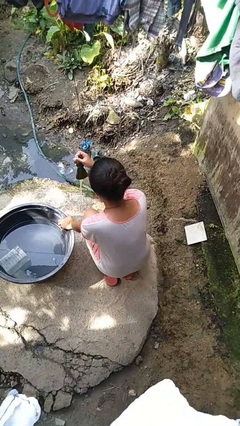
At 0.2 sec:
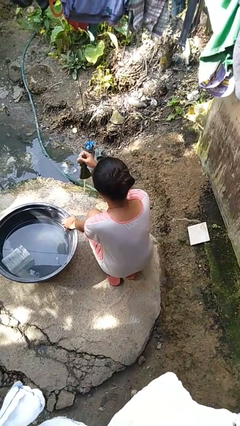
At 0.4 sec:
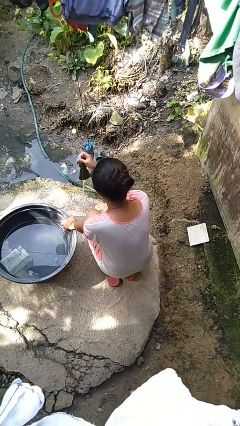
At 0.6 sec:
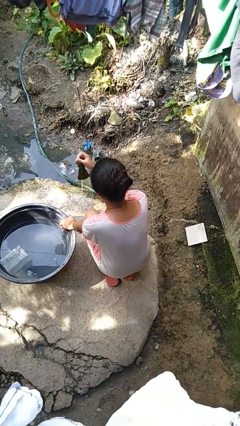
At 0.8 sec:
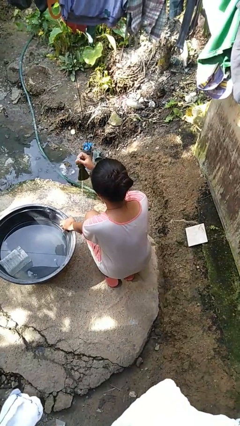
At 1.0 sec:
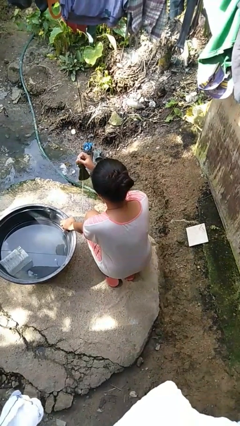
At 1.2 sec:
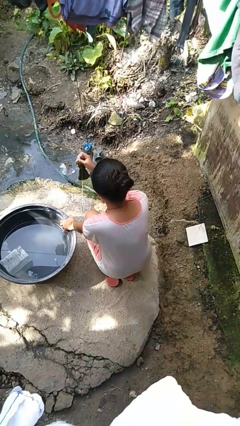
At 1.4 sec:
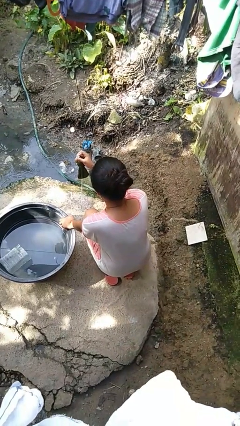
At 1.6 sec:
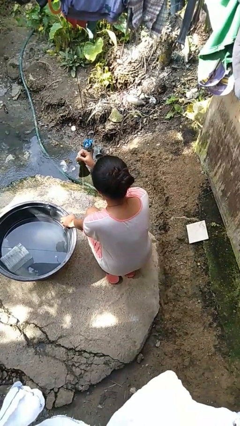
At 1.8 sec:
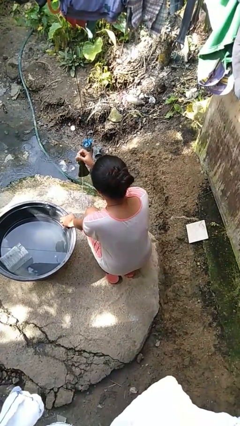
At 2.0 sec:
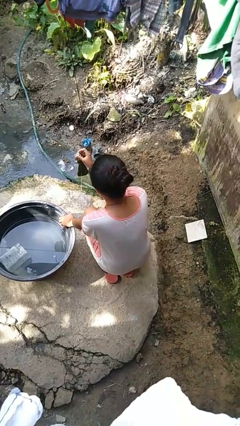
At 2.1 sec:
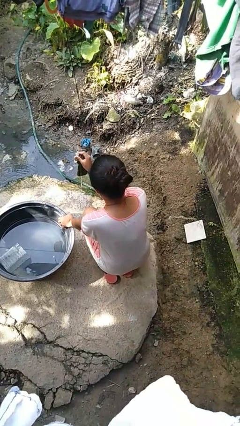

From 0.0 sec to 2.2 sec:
person turns off faucet

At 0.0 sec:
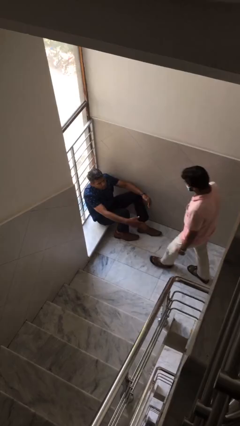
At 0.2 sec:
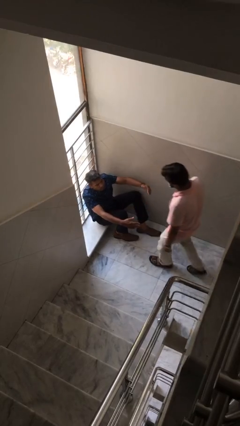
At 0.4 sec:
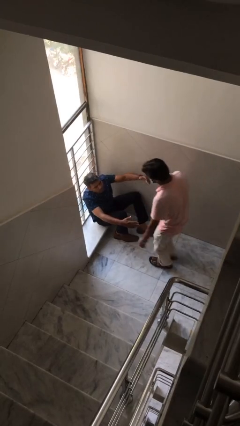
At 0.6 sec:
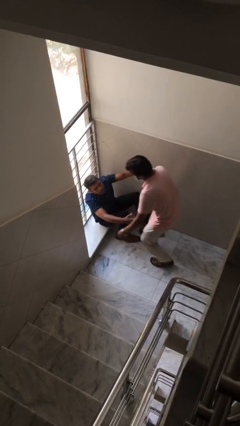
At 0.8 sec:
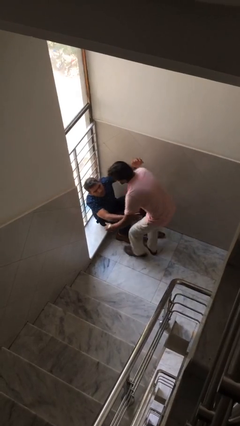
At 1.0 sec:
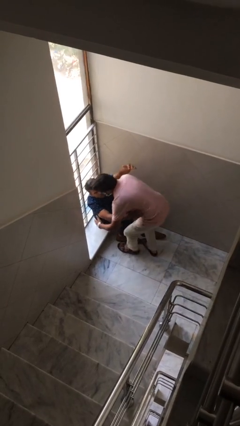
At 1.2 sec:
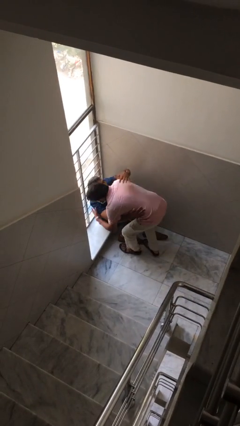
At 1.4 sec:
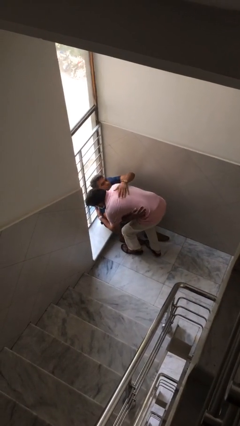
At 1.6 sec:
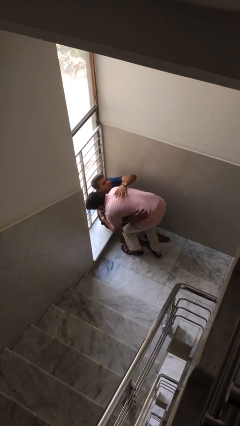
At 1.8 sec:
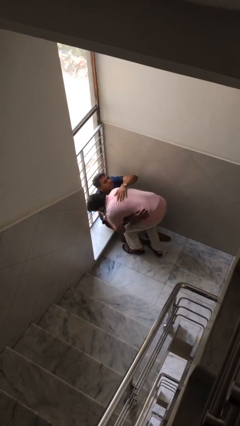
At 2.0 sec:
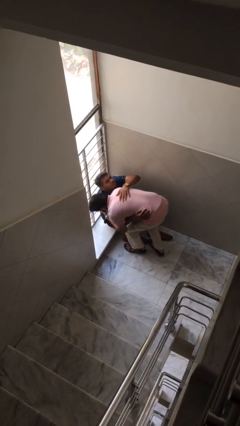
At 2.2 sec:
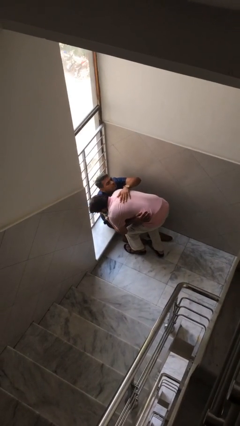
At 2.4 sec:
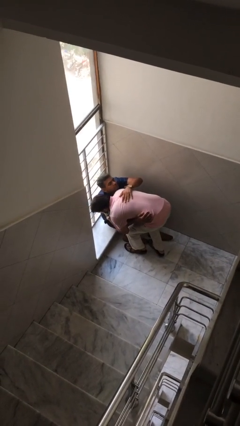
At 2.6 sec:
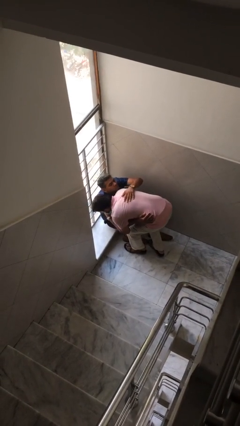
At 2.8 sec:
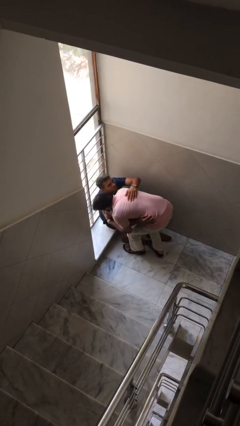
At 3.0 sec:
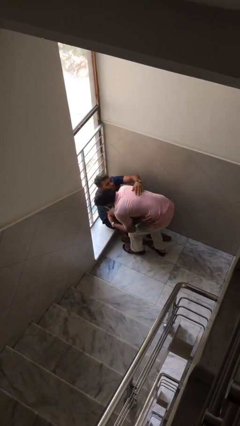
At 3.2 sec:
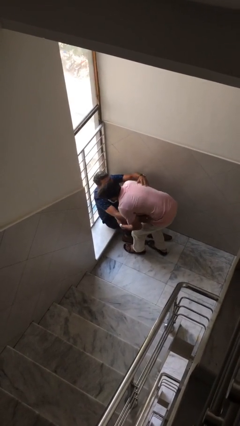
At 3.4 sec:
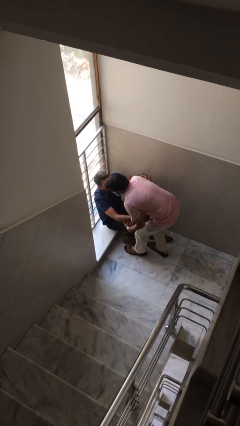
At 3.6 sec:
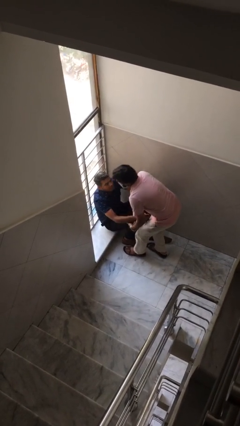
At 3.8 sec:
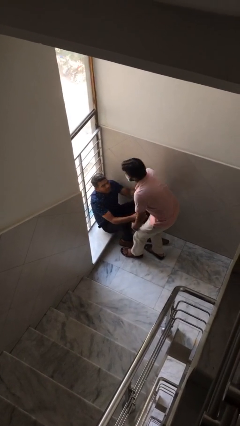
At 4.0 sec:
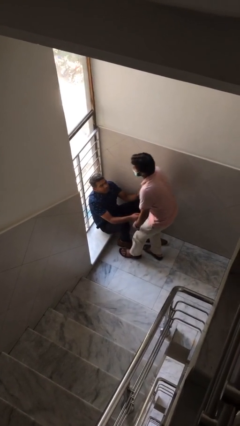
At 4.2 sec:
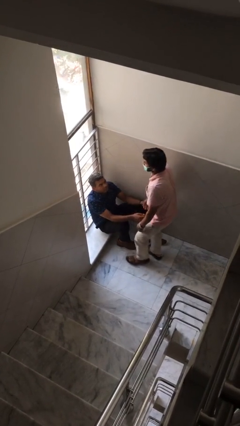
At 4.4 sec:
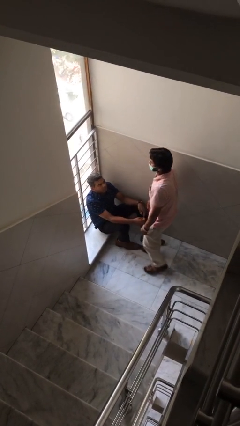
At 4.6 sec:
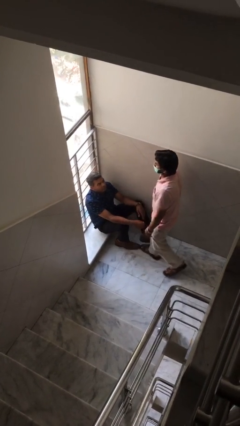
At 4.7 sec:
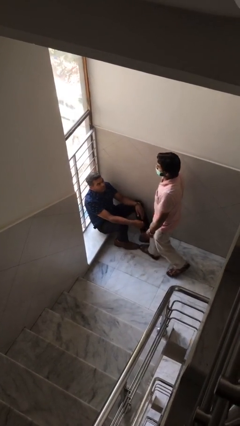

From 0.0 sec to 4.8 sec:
person embraces person

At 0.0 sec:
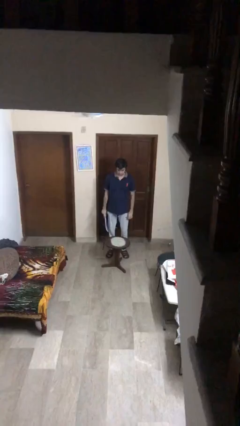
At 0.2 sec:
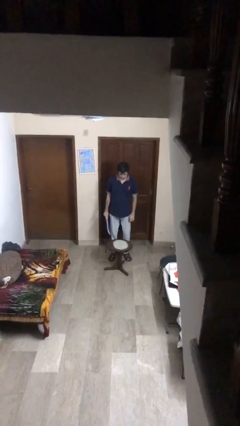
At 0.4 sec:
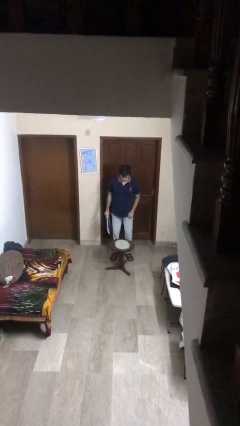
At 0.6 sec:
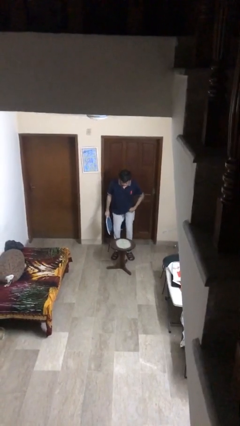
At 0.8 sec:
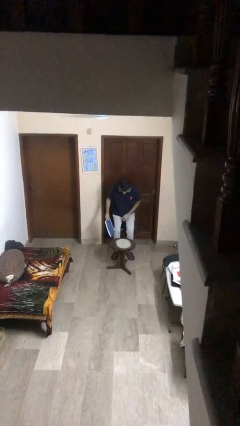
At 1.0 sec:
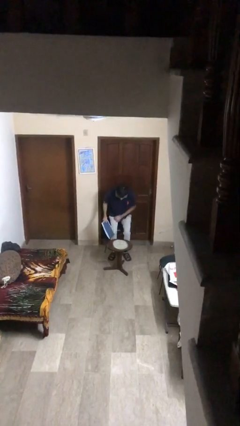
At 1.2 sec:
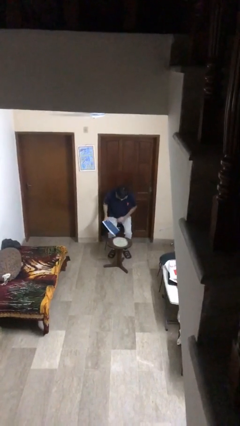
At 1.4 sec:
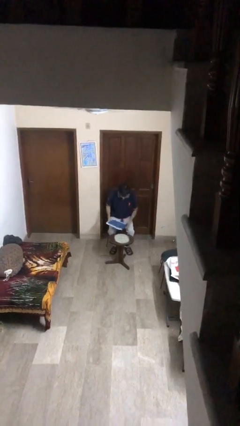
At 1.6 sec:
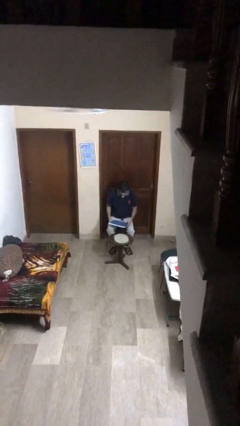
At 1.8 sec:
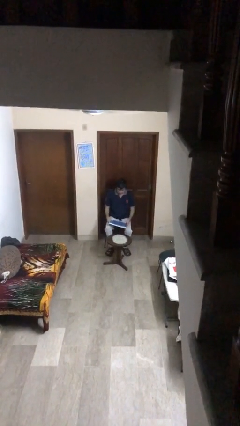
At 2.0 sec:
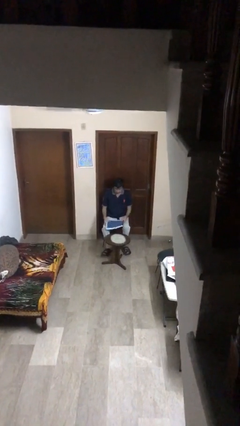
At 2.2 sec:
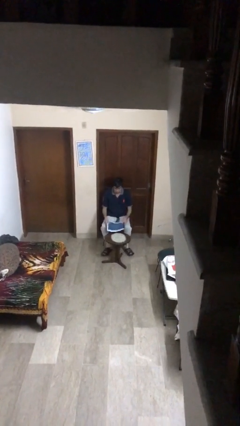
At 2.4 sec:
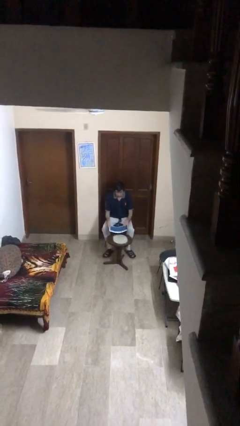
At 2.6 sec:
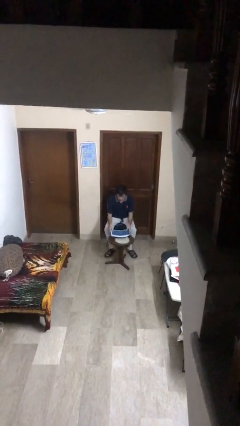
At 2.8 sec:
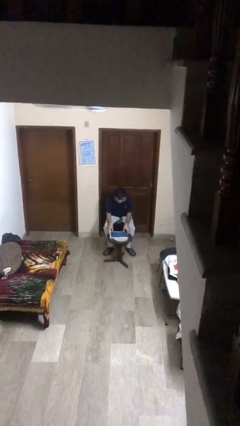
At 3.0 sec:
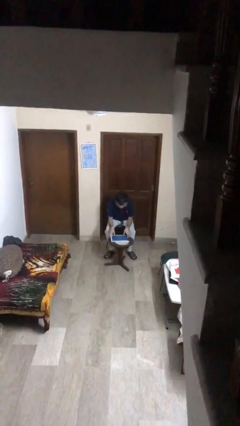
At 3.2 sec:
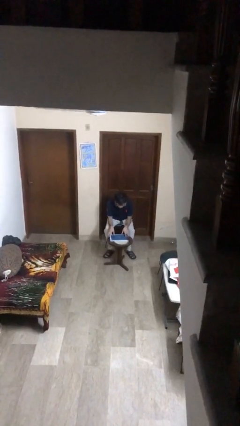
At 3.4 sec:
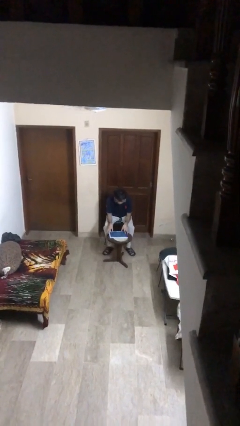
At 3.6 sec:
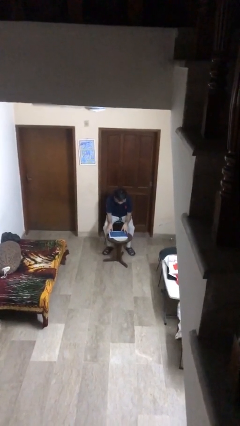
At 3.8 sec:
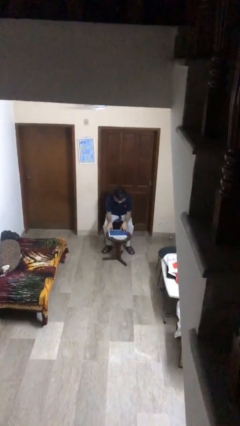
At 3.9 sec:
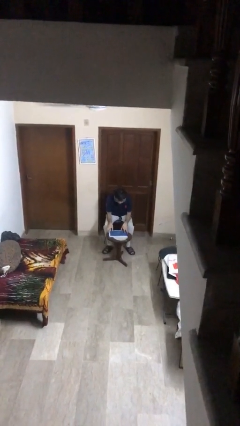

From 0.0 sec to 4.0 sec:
person sits down

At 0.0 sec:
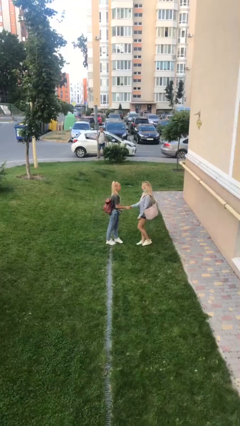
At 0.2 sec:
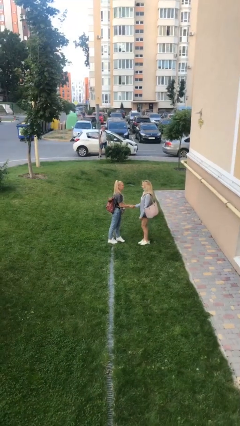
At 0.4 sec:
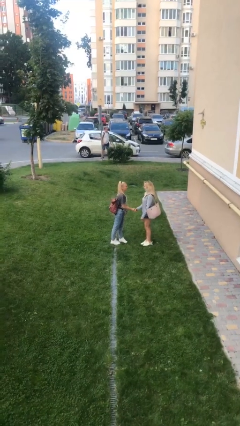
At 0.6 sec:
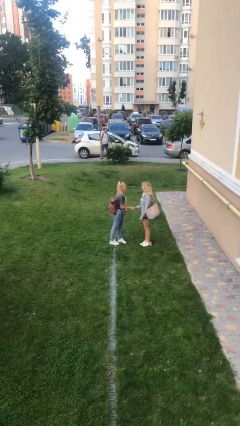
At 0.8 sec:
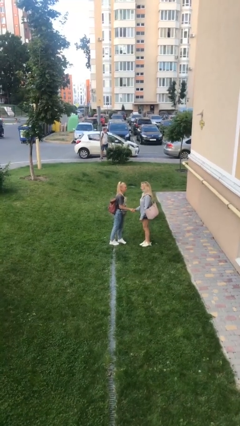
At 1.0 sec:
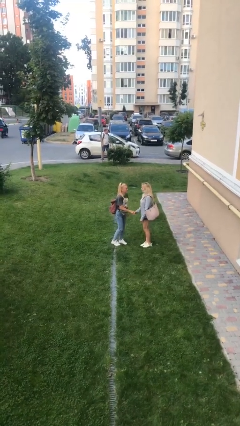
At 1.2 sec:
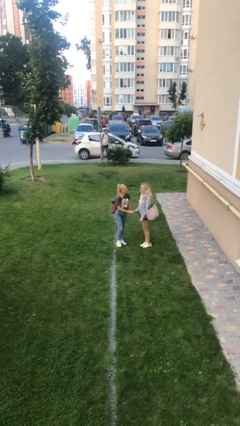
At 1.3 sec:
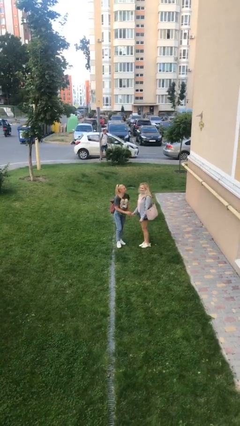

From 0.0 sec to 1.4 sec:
person shakes hand

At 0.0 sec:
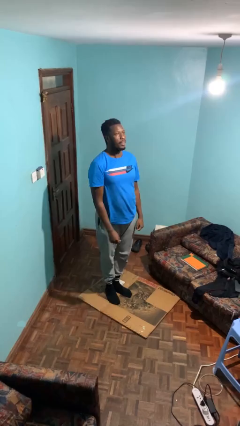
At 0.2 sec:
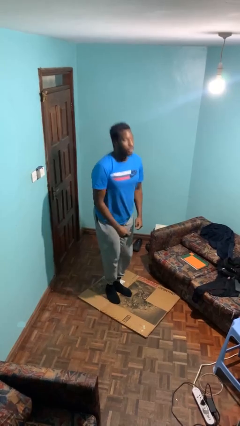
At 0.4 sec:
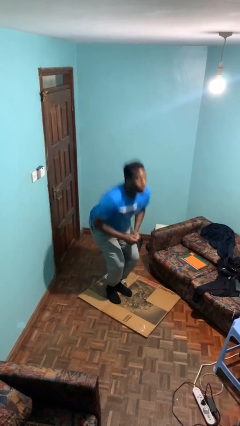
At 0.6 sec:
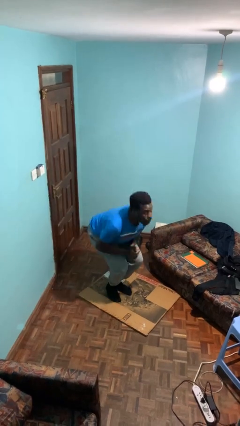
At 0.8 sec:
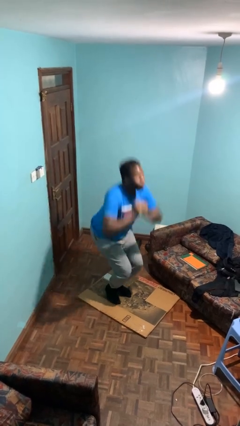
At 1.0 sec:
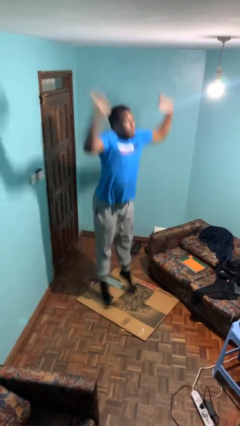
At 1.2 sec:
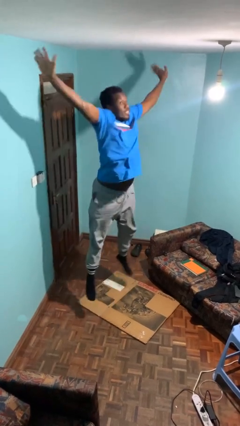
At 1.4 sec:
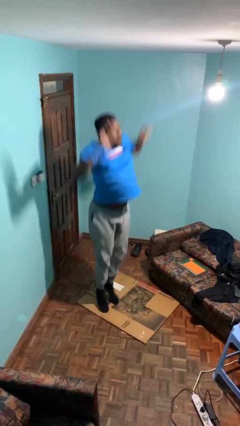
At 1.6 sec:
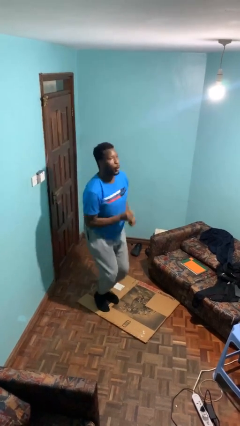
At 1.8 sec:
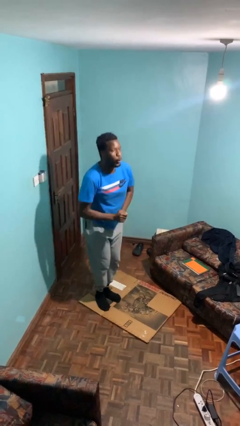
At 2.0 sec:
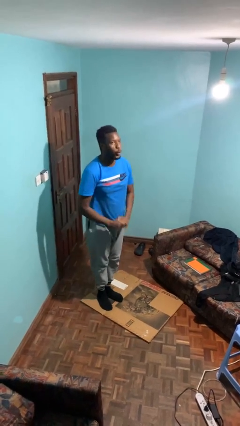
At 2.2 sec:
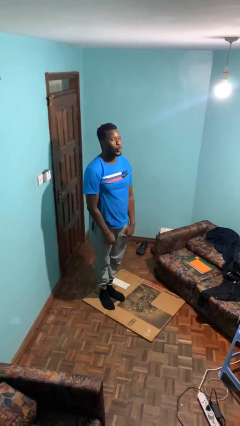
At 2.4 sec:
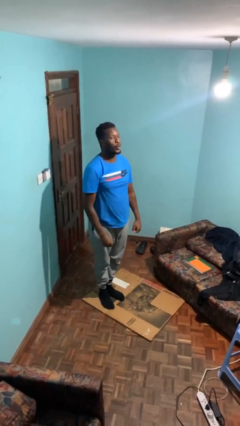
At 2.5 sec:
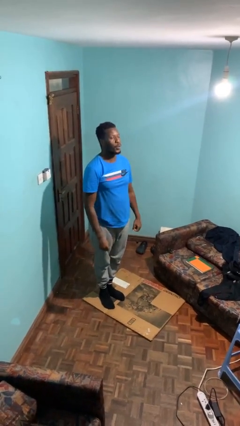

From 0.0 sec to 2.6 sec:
person exercises with jumping jacks

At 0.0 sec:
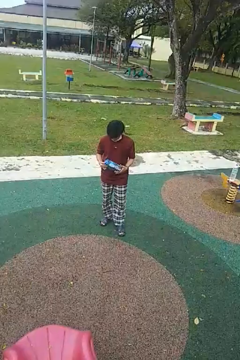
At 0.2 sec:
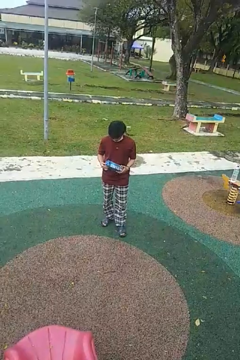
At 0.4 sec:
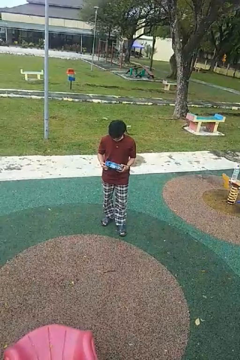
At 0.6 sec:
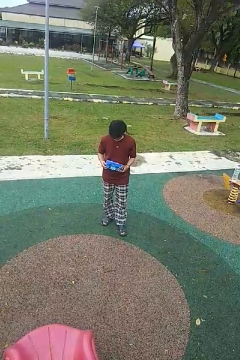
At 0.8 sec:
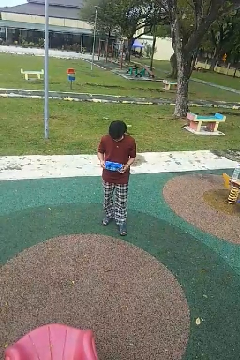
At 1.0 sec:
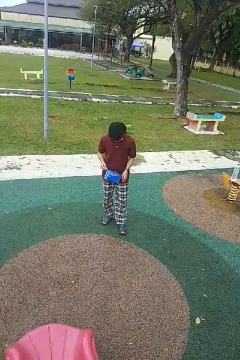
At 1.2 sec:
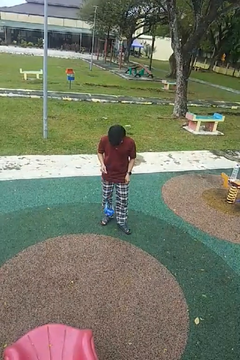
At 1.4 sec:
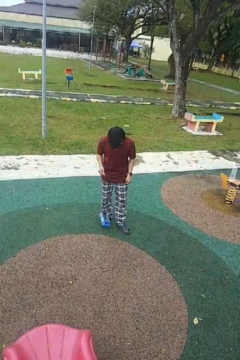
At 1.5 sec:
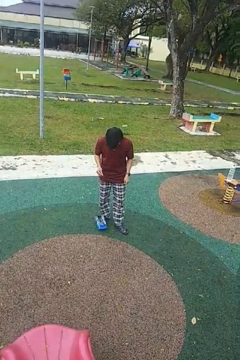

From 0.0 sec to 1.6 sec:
person drops object

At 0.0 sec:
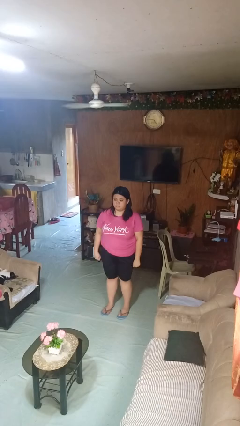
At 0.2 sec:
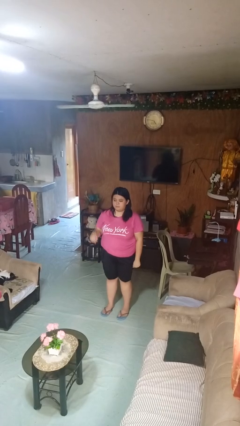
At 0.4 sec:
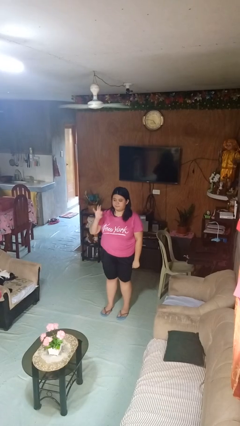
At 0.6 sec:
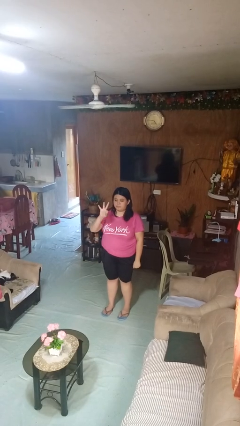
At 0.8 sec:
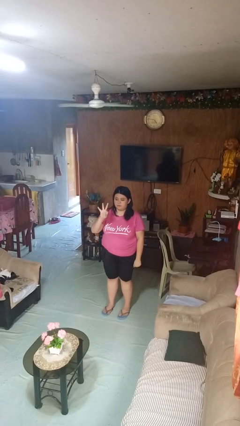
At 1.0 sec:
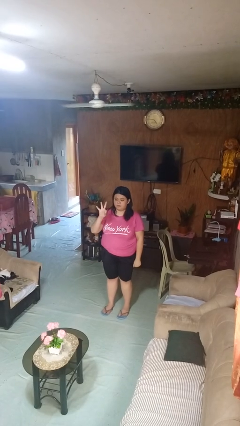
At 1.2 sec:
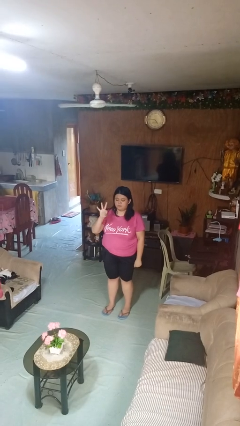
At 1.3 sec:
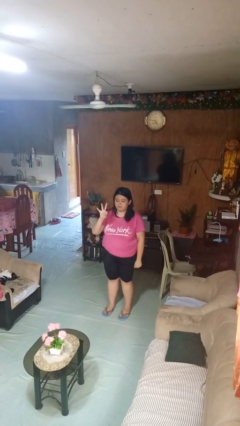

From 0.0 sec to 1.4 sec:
person gestures number three
